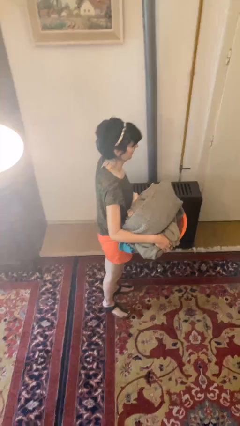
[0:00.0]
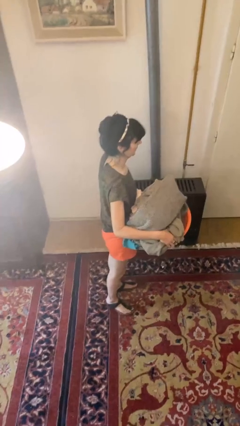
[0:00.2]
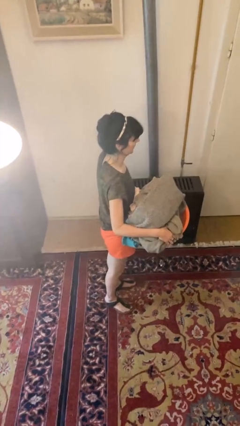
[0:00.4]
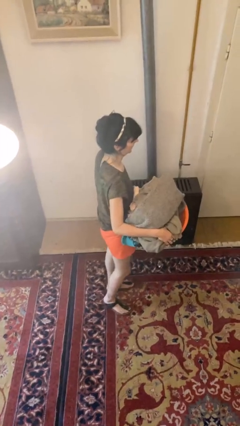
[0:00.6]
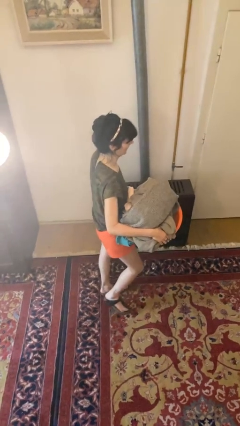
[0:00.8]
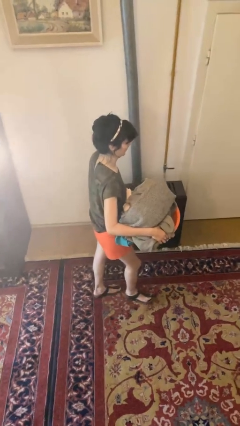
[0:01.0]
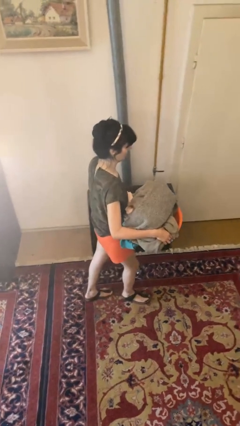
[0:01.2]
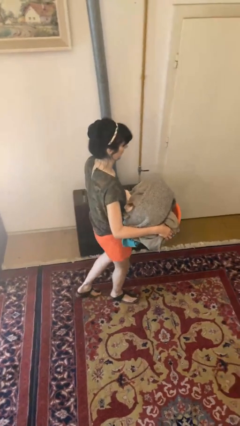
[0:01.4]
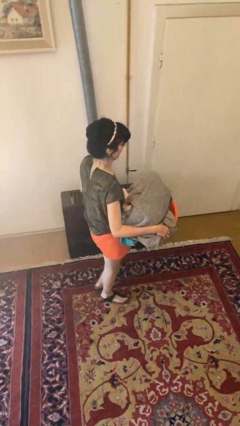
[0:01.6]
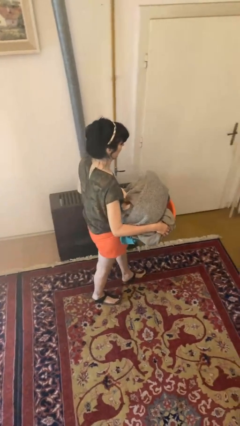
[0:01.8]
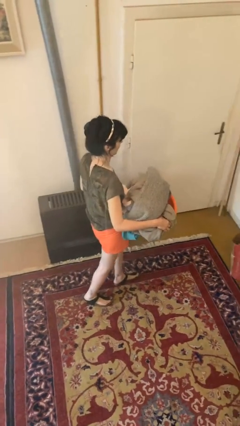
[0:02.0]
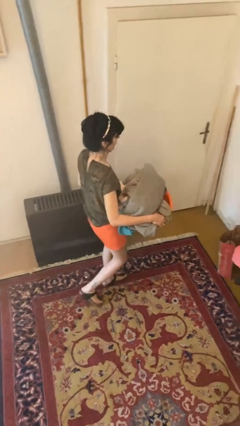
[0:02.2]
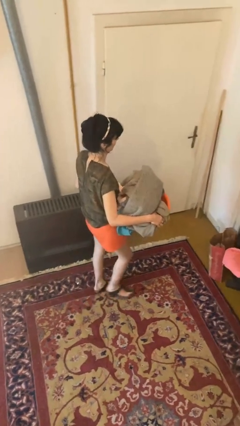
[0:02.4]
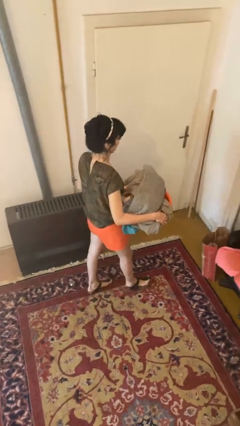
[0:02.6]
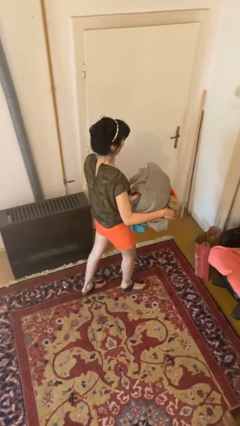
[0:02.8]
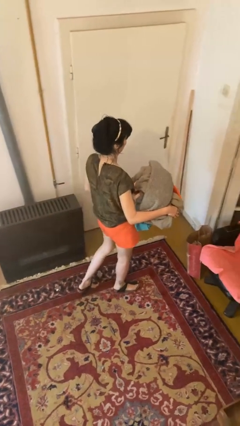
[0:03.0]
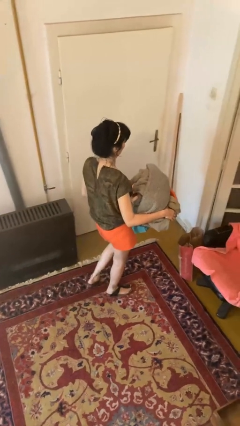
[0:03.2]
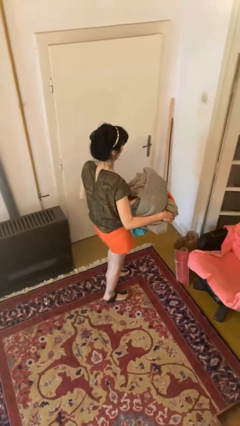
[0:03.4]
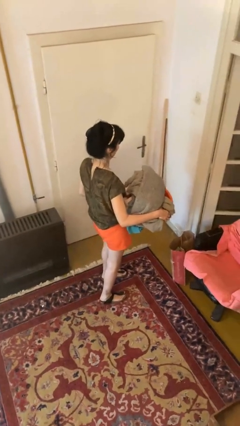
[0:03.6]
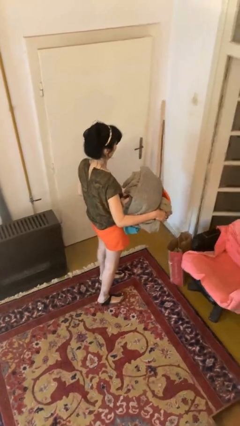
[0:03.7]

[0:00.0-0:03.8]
person carries laundry basket

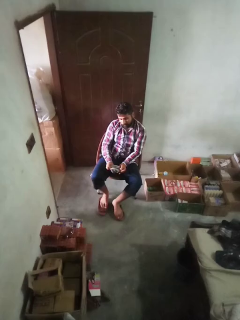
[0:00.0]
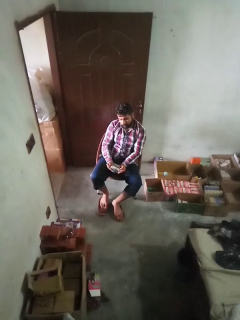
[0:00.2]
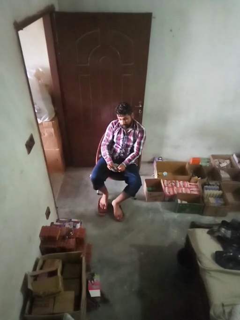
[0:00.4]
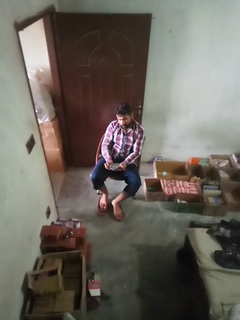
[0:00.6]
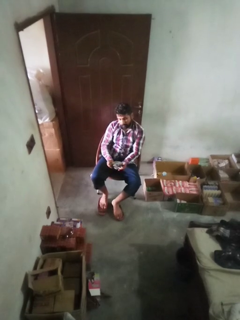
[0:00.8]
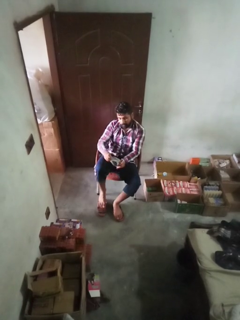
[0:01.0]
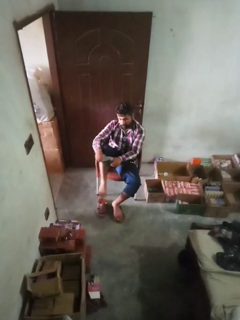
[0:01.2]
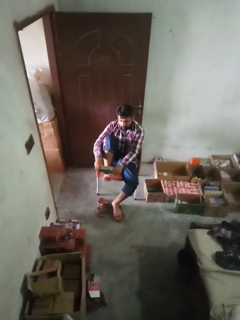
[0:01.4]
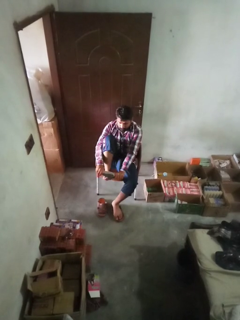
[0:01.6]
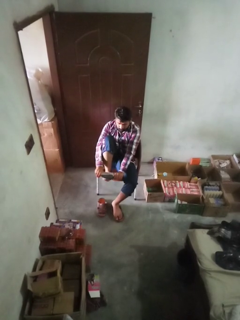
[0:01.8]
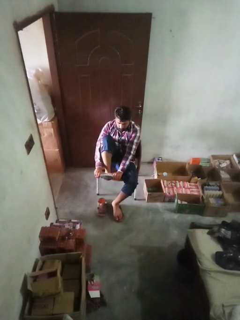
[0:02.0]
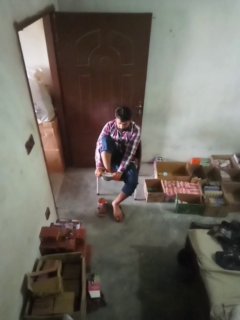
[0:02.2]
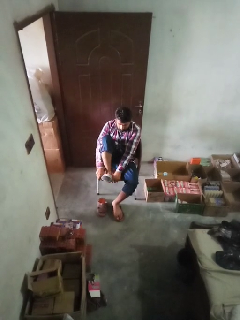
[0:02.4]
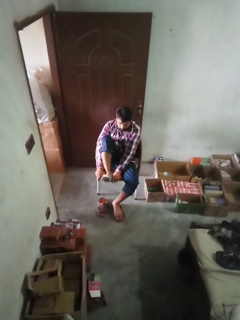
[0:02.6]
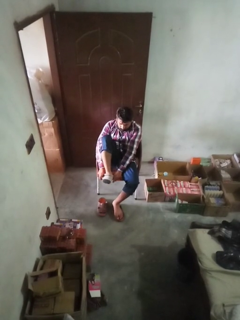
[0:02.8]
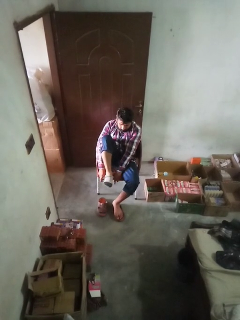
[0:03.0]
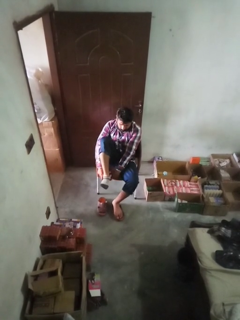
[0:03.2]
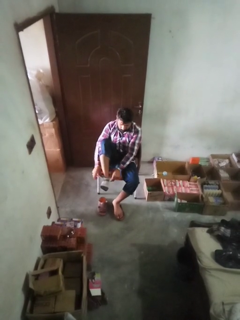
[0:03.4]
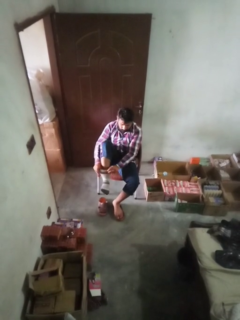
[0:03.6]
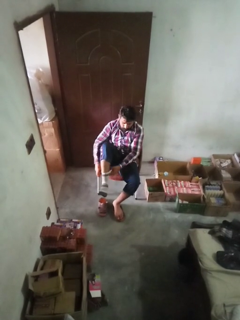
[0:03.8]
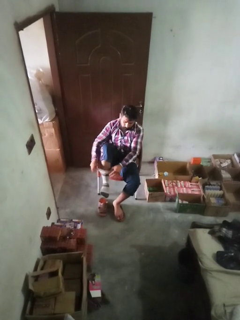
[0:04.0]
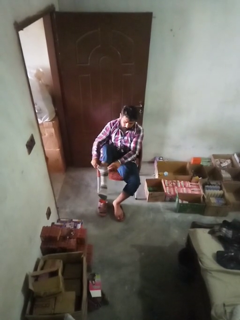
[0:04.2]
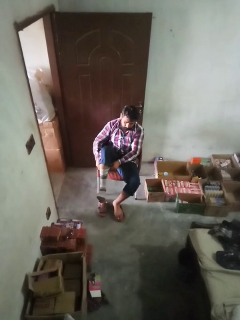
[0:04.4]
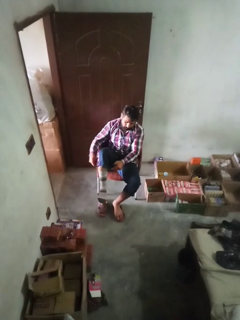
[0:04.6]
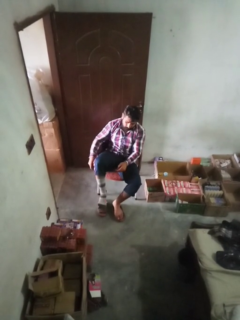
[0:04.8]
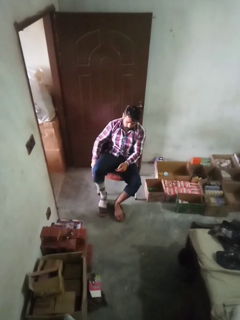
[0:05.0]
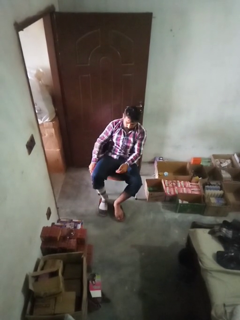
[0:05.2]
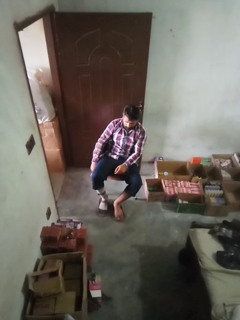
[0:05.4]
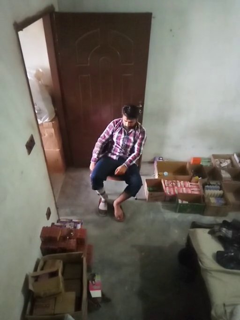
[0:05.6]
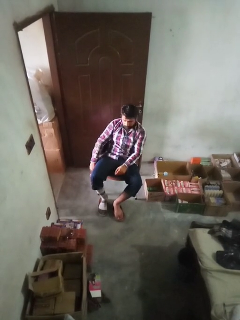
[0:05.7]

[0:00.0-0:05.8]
person puts on socks

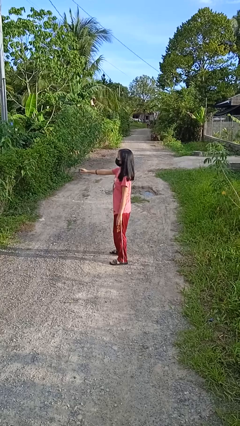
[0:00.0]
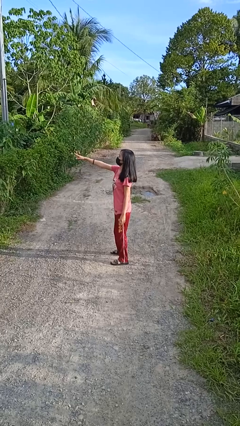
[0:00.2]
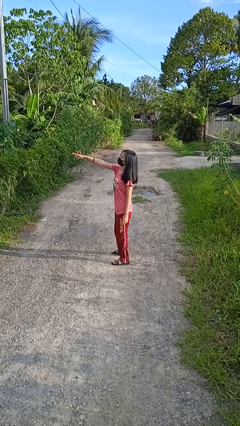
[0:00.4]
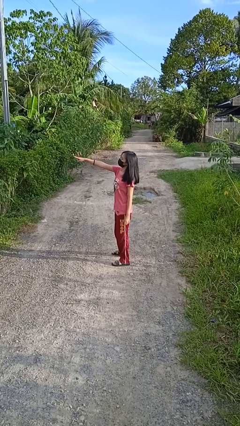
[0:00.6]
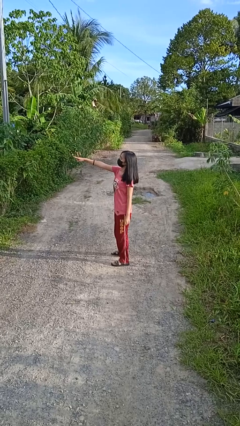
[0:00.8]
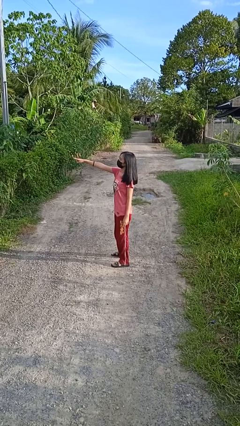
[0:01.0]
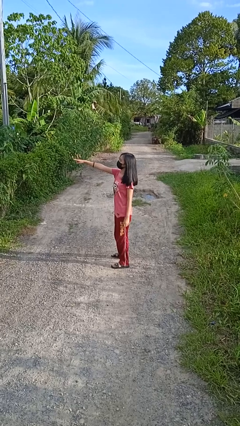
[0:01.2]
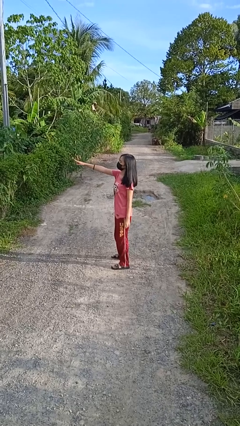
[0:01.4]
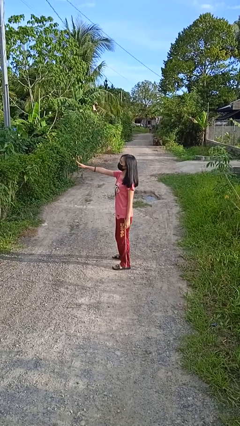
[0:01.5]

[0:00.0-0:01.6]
person points at person

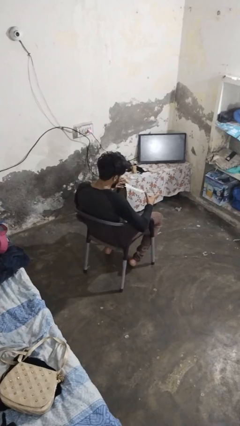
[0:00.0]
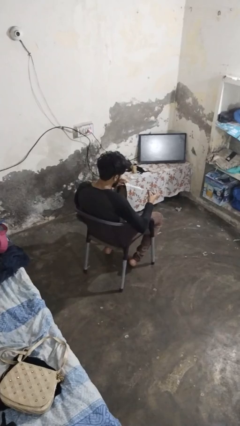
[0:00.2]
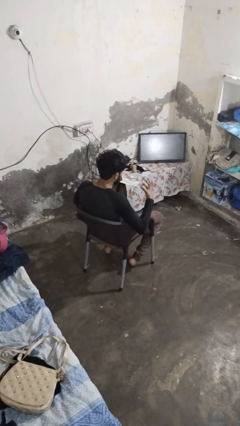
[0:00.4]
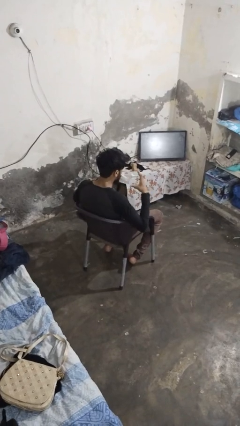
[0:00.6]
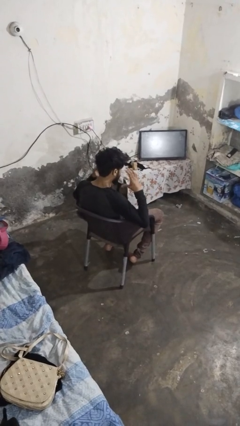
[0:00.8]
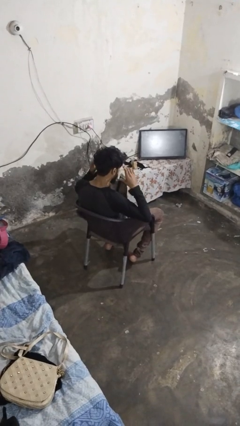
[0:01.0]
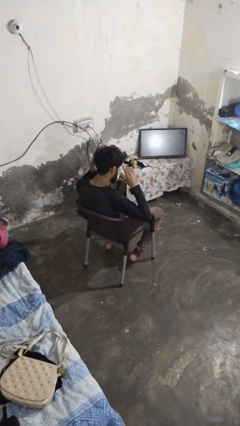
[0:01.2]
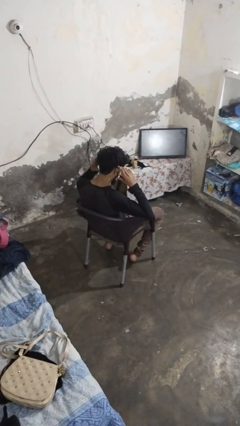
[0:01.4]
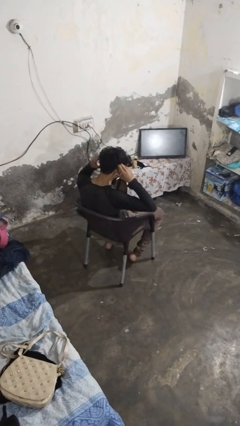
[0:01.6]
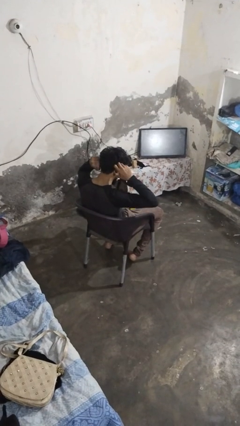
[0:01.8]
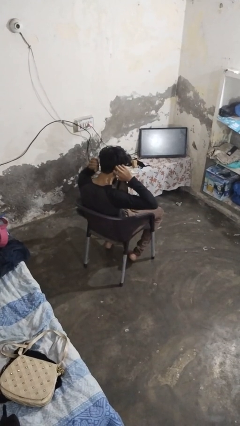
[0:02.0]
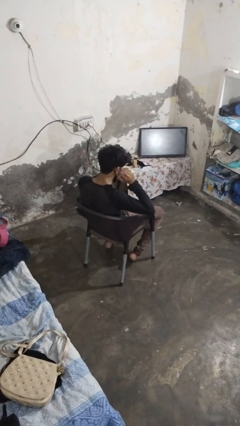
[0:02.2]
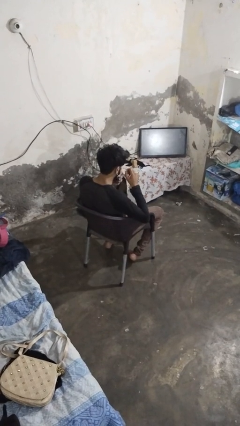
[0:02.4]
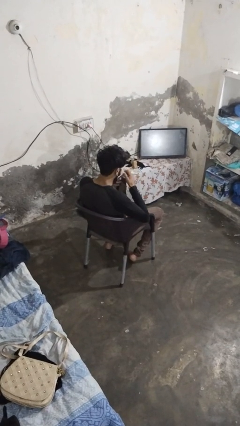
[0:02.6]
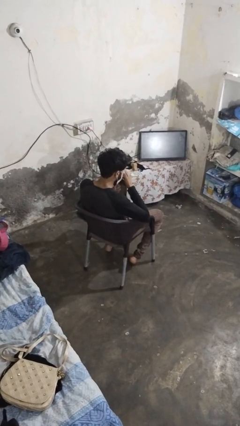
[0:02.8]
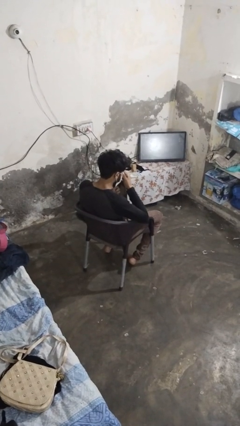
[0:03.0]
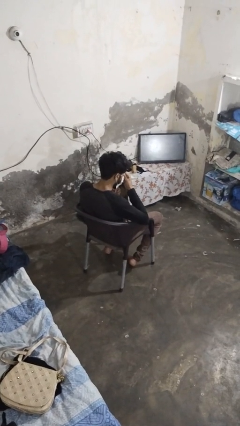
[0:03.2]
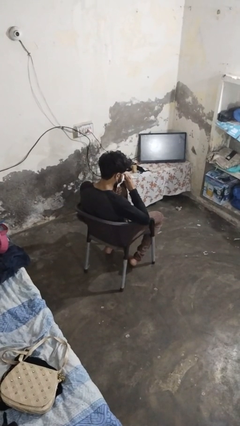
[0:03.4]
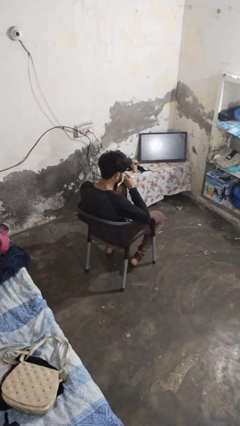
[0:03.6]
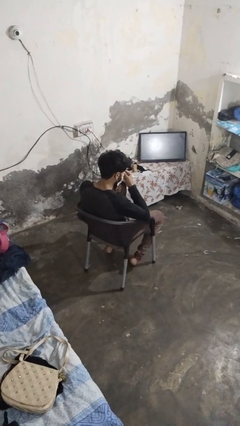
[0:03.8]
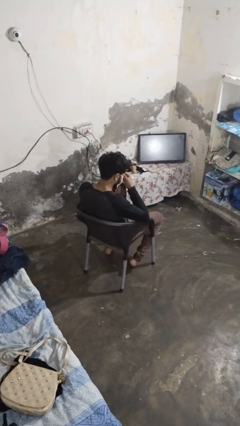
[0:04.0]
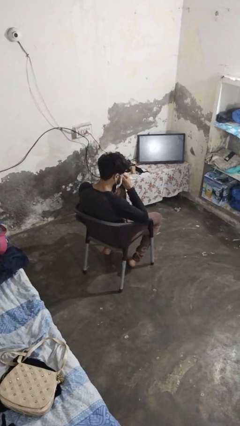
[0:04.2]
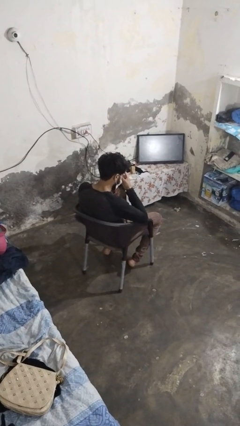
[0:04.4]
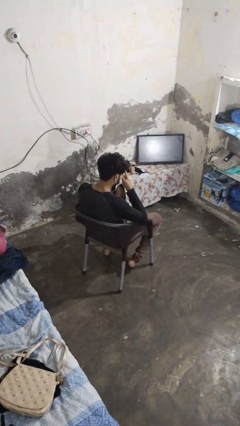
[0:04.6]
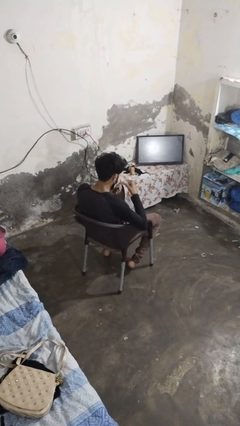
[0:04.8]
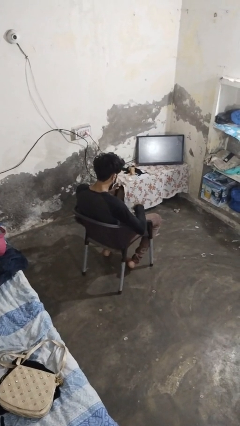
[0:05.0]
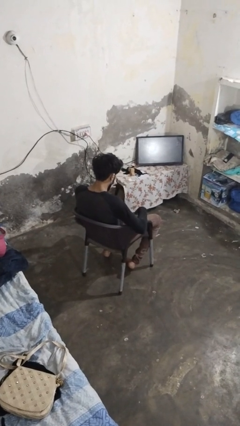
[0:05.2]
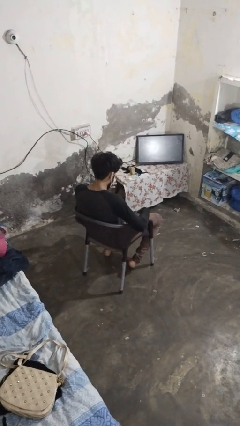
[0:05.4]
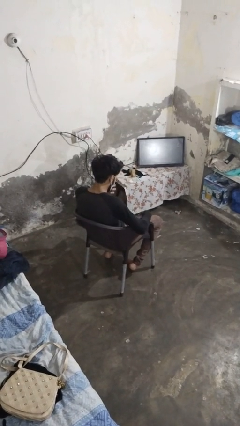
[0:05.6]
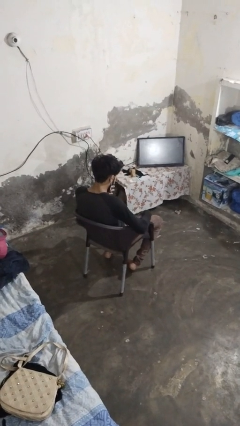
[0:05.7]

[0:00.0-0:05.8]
person puts on facemask

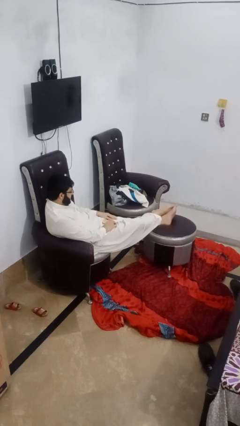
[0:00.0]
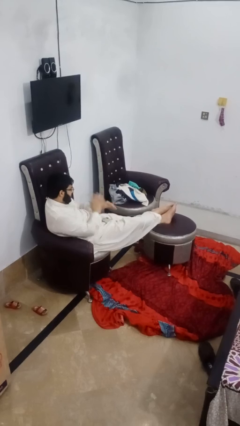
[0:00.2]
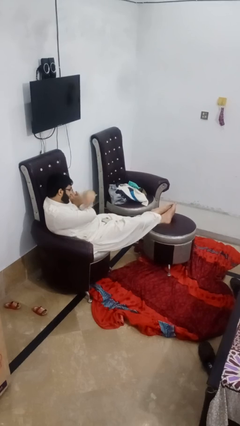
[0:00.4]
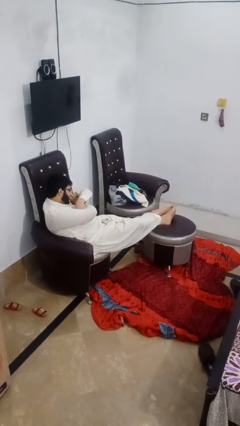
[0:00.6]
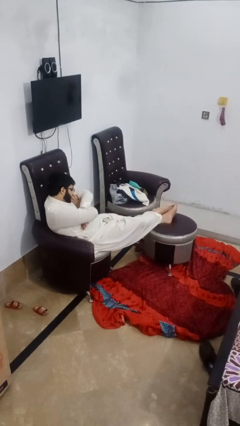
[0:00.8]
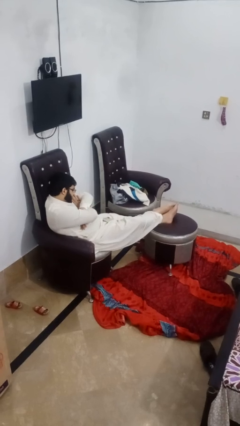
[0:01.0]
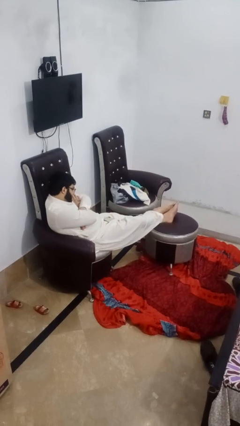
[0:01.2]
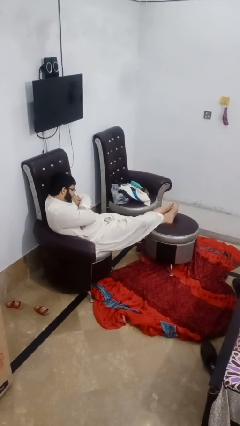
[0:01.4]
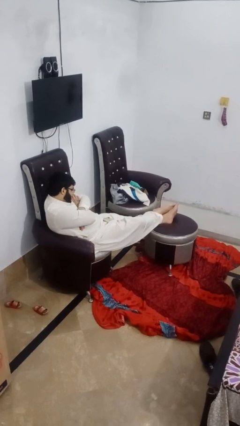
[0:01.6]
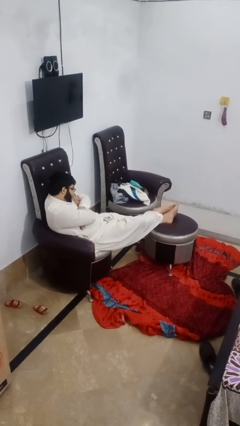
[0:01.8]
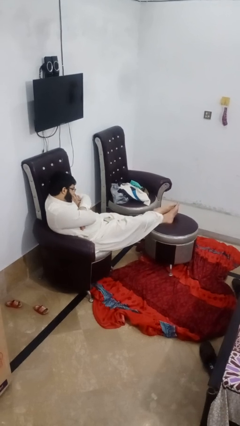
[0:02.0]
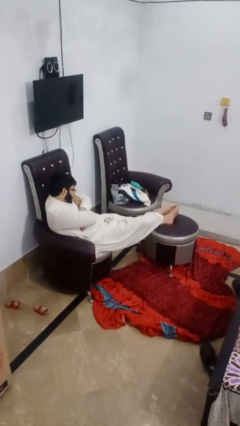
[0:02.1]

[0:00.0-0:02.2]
person crosses arms
